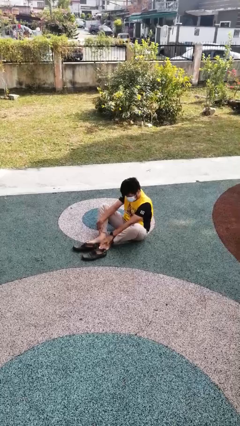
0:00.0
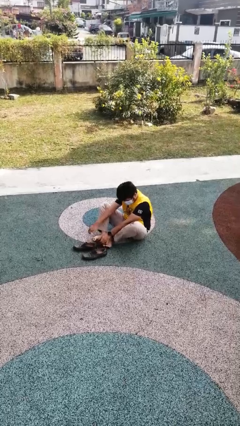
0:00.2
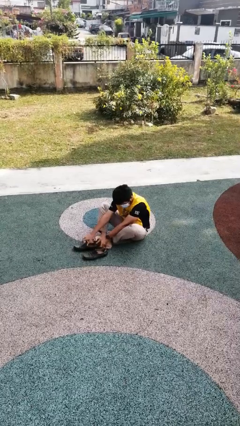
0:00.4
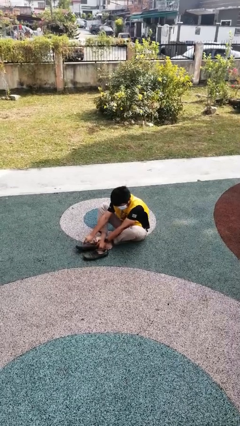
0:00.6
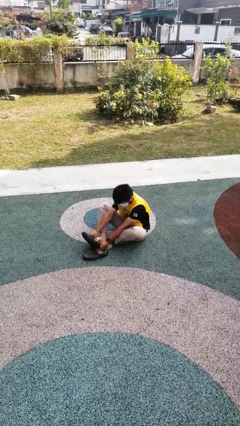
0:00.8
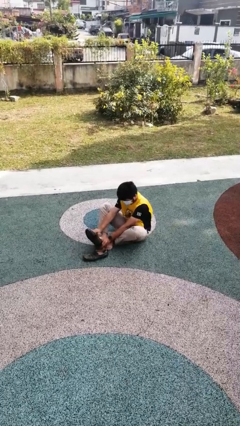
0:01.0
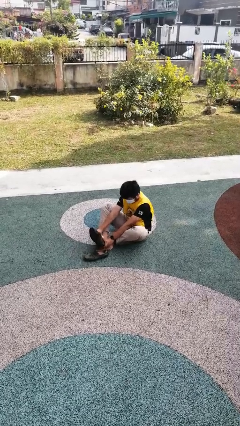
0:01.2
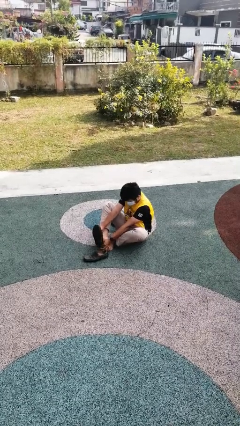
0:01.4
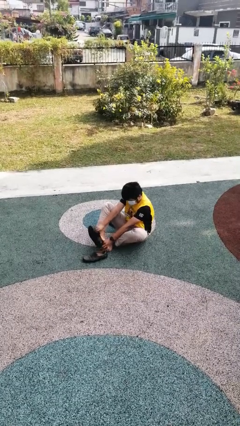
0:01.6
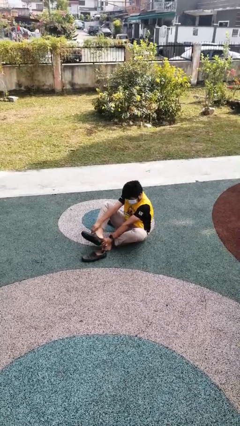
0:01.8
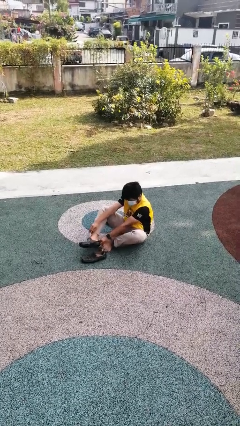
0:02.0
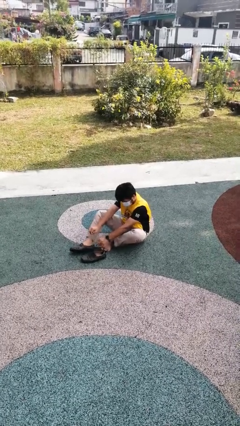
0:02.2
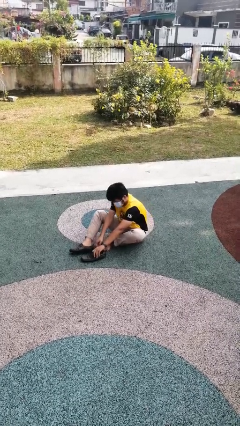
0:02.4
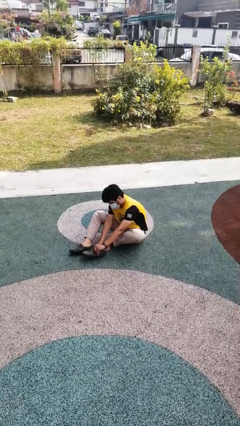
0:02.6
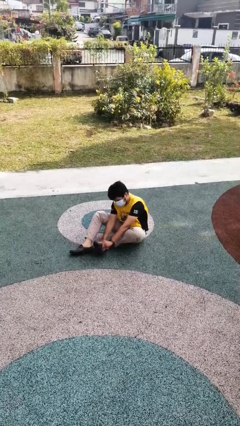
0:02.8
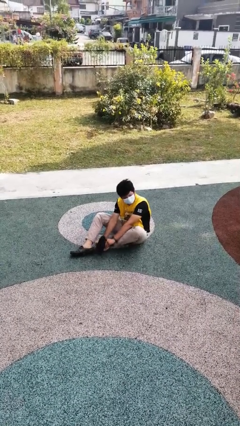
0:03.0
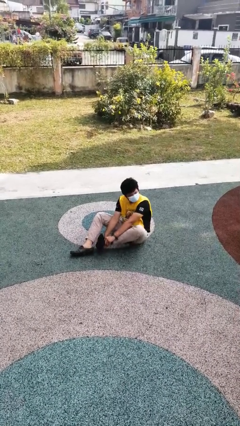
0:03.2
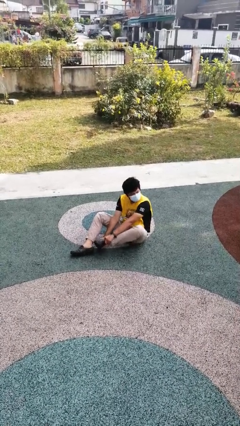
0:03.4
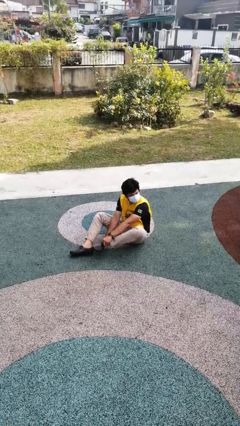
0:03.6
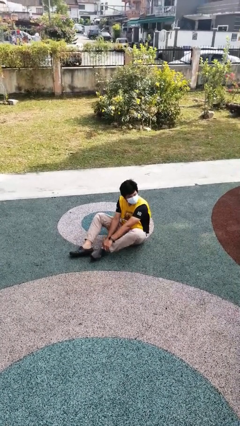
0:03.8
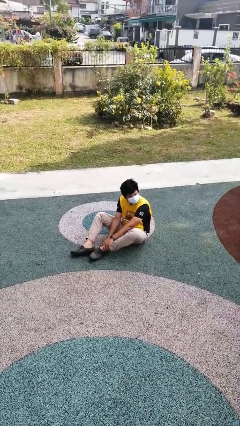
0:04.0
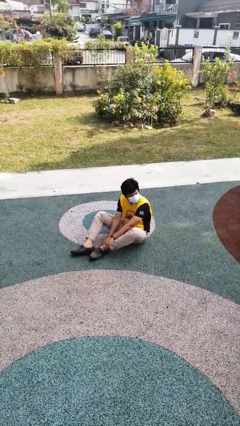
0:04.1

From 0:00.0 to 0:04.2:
person puts on shoes

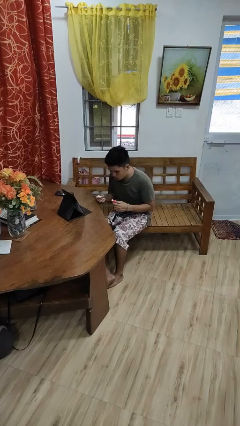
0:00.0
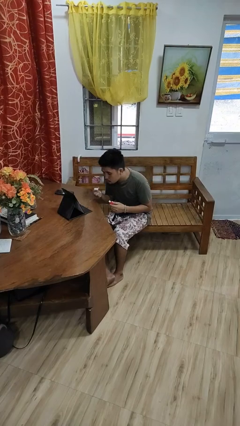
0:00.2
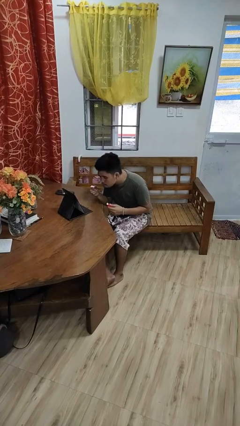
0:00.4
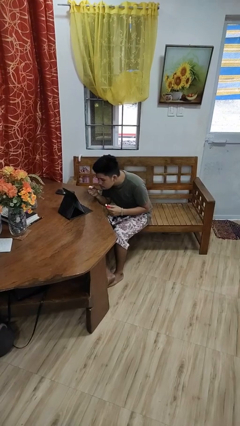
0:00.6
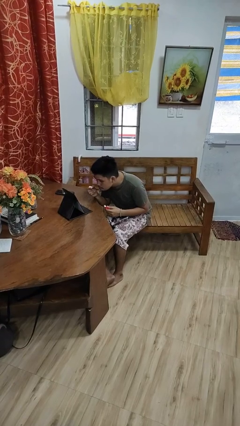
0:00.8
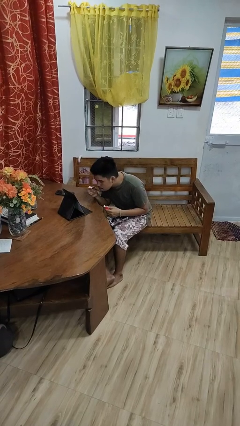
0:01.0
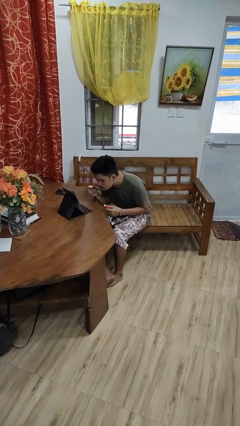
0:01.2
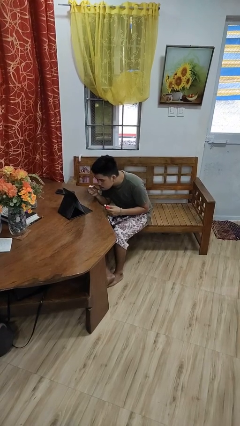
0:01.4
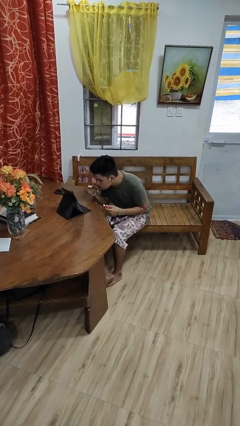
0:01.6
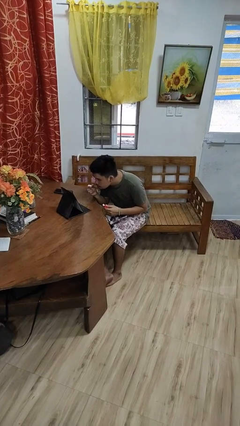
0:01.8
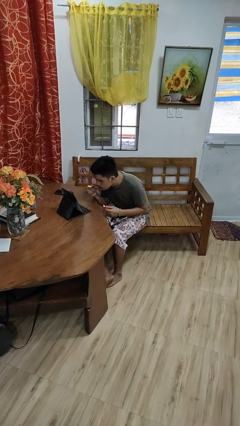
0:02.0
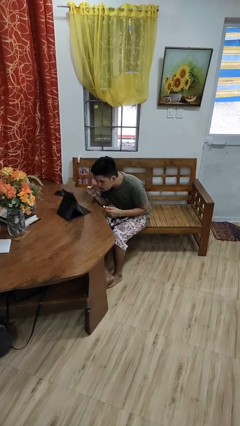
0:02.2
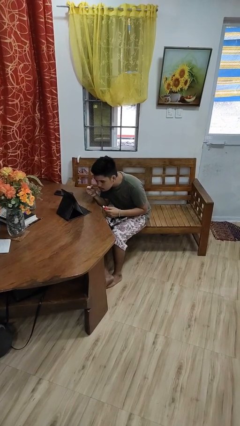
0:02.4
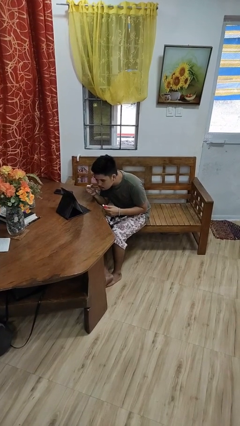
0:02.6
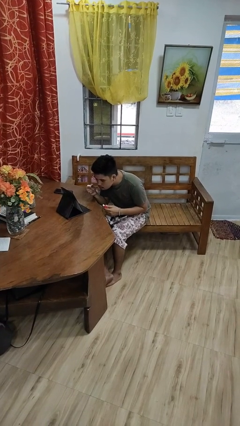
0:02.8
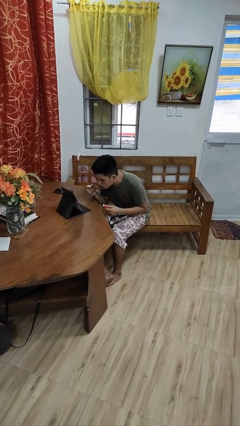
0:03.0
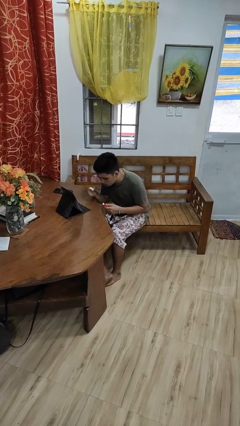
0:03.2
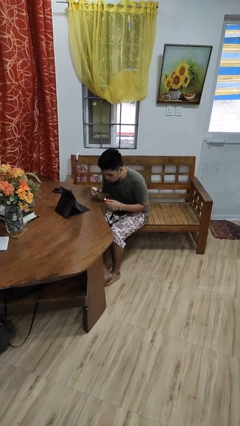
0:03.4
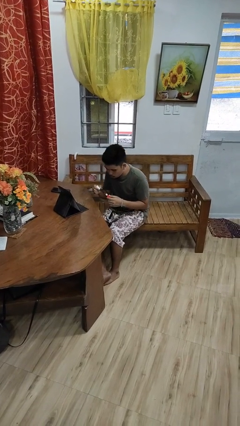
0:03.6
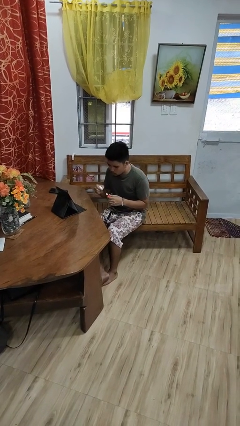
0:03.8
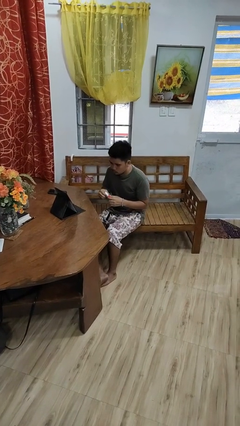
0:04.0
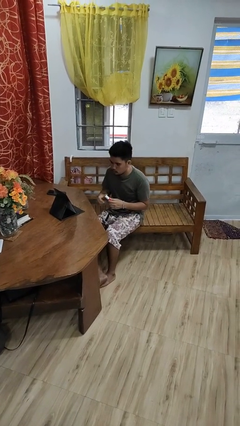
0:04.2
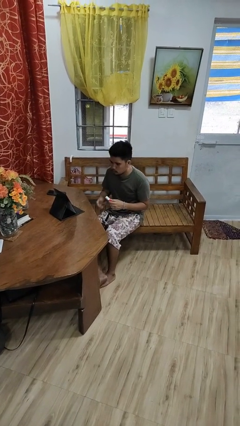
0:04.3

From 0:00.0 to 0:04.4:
person applies lip makeup

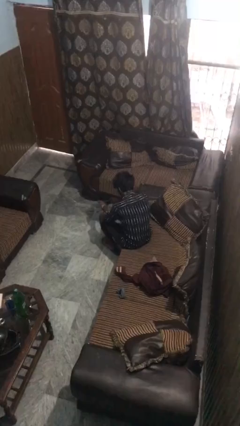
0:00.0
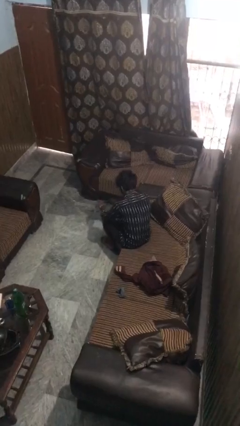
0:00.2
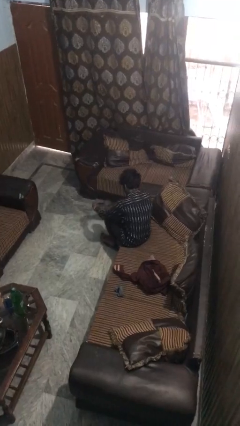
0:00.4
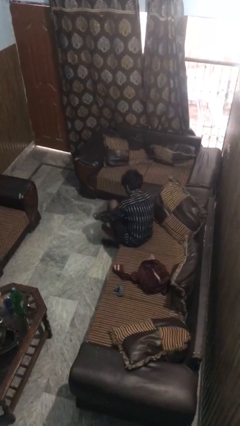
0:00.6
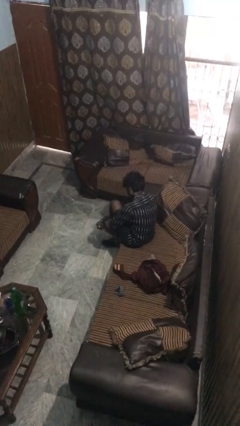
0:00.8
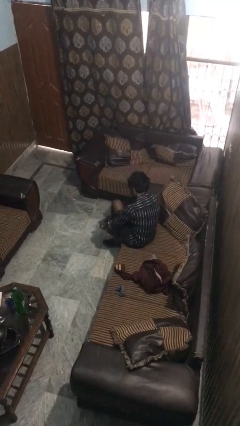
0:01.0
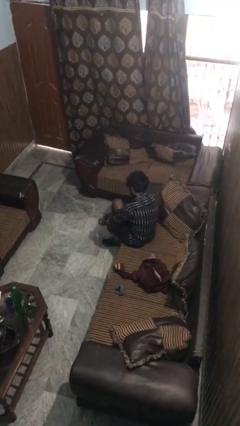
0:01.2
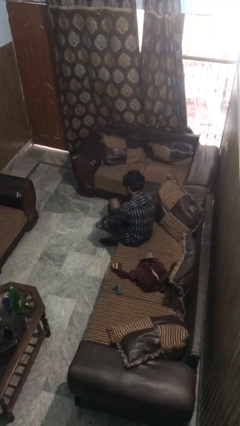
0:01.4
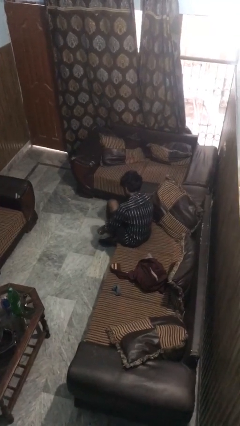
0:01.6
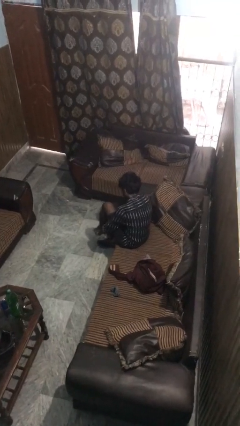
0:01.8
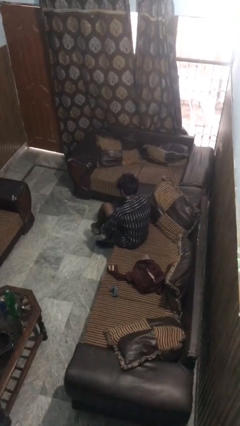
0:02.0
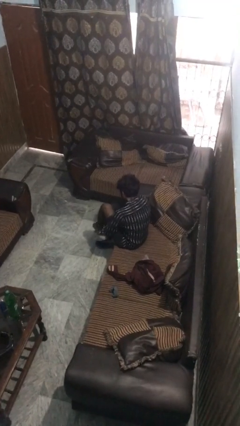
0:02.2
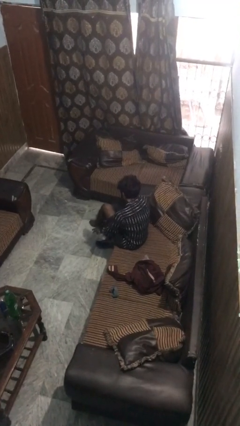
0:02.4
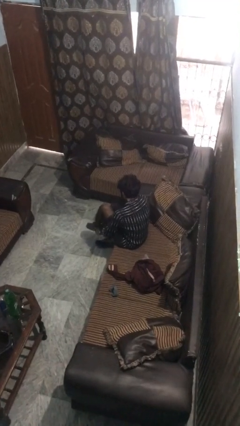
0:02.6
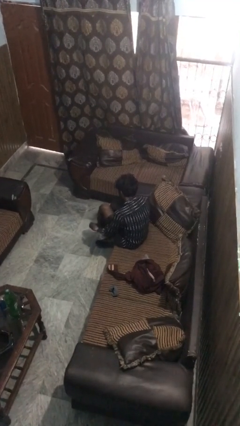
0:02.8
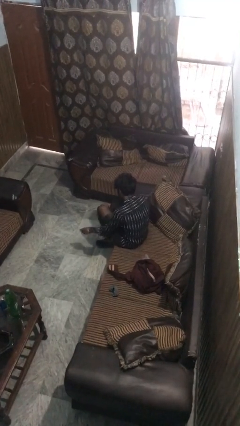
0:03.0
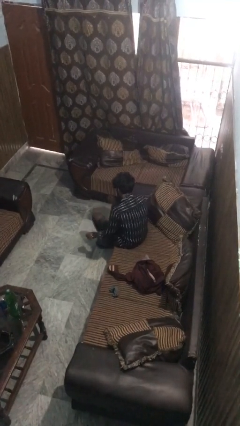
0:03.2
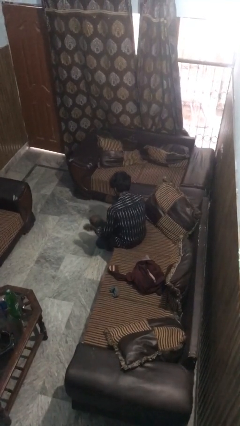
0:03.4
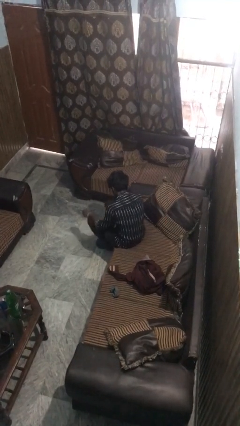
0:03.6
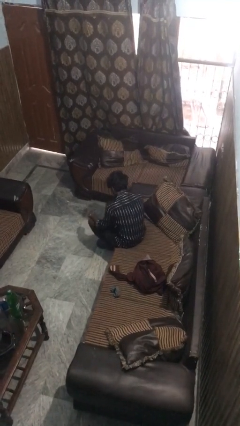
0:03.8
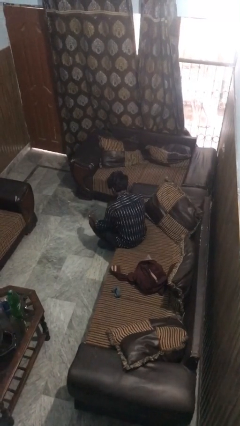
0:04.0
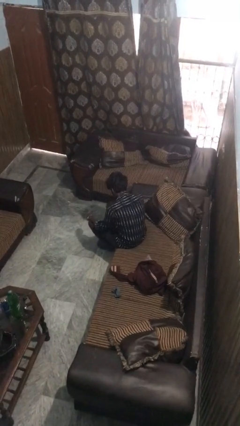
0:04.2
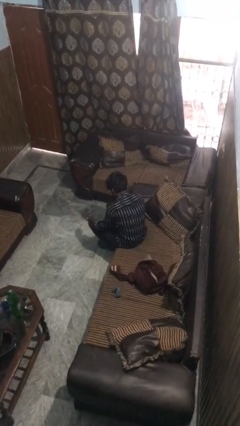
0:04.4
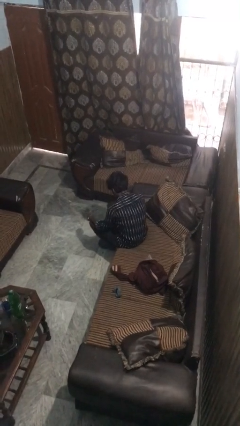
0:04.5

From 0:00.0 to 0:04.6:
person puts on socks

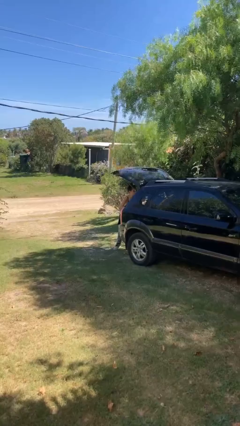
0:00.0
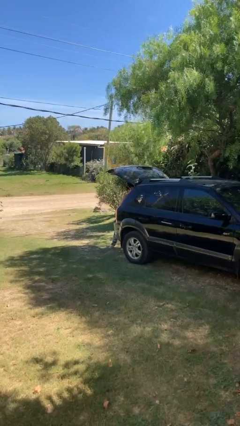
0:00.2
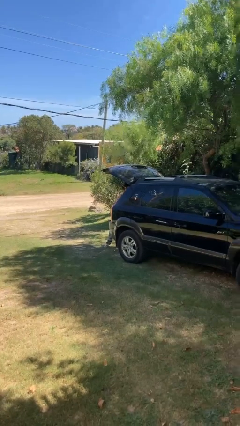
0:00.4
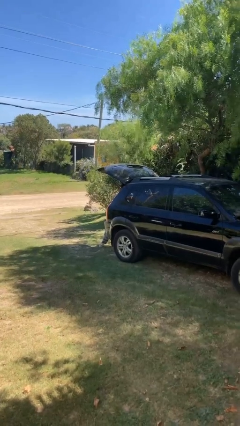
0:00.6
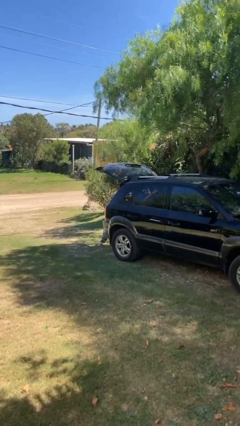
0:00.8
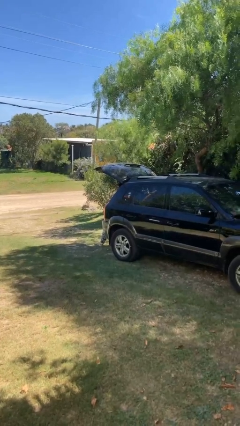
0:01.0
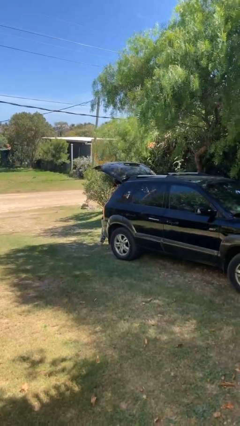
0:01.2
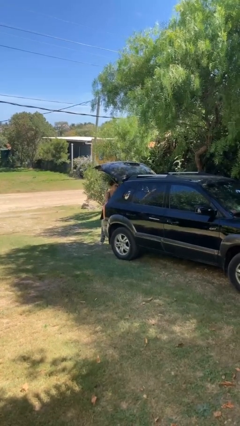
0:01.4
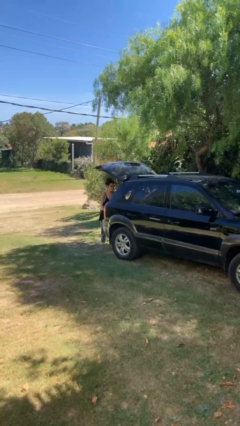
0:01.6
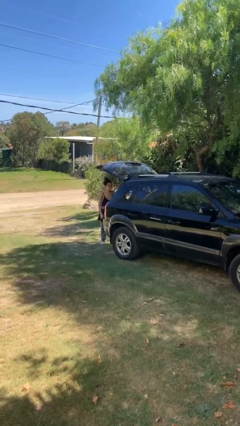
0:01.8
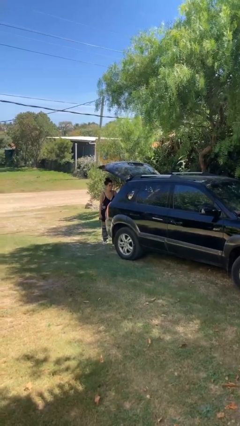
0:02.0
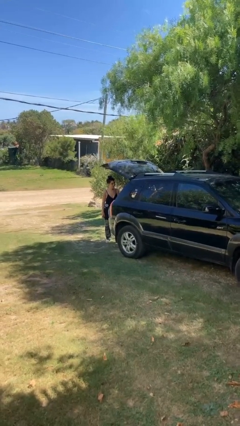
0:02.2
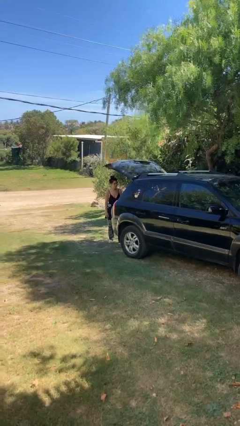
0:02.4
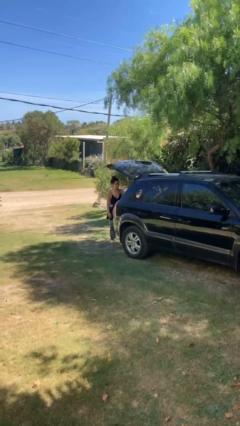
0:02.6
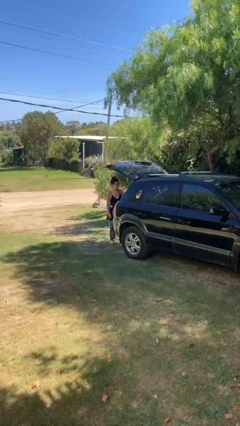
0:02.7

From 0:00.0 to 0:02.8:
person loads car

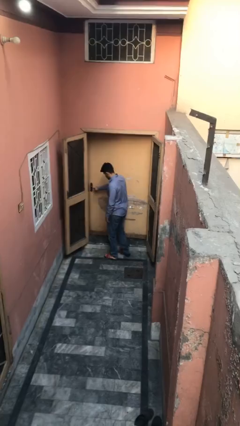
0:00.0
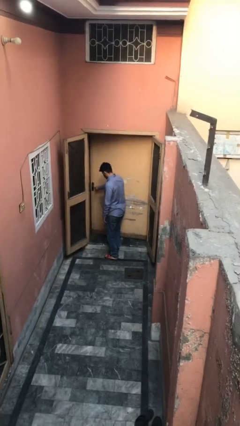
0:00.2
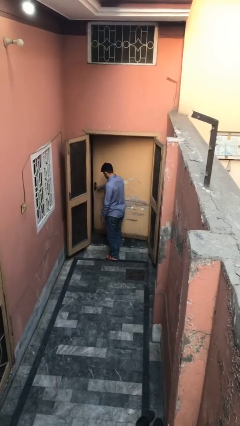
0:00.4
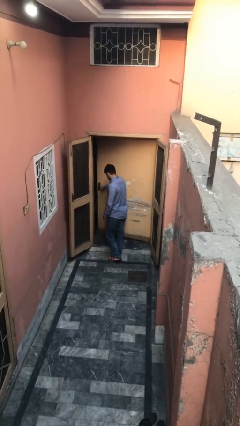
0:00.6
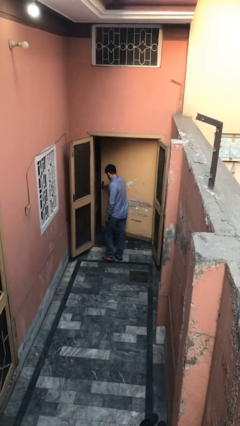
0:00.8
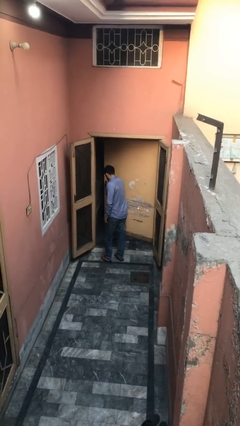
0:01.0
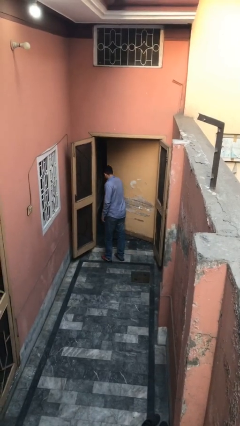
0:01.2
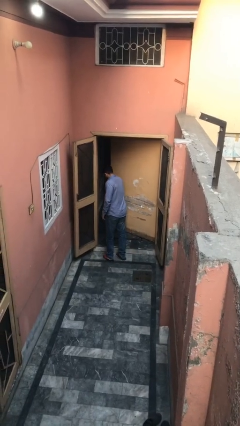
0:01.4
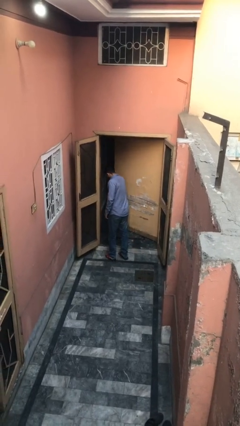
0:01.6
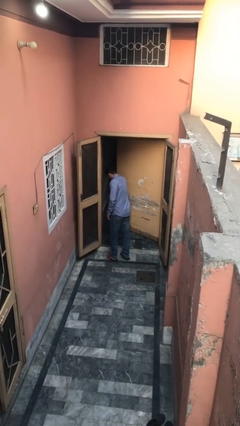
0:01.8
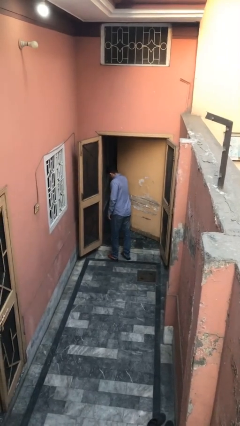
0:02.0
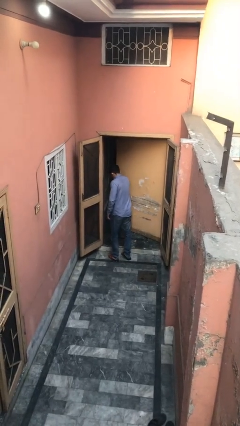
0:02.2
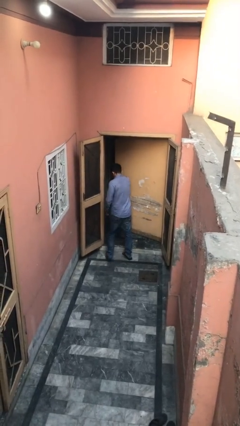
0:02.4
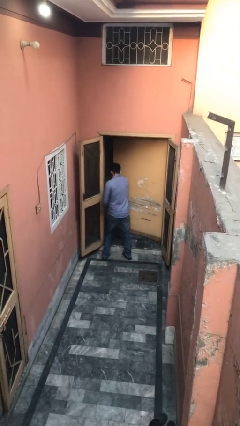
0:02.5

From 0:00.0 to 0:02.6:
person opens facility door
